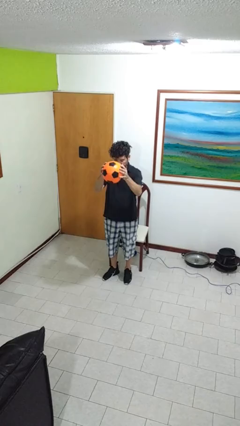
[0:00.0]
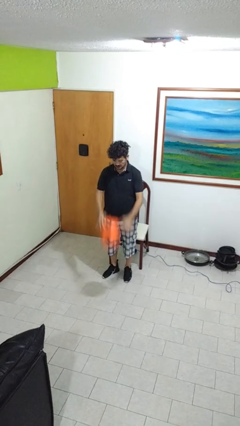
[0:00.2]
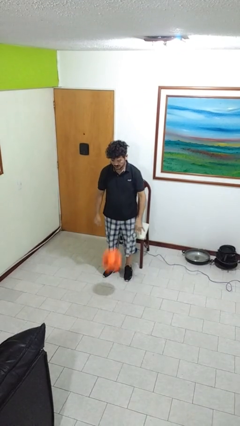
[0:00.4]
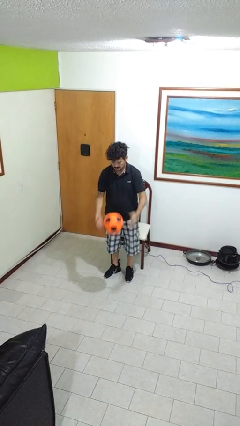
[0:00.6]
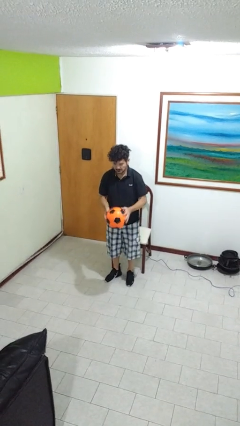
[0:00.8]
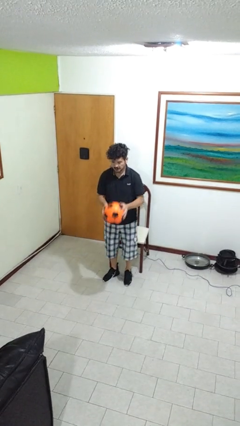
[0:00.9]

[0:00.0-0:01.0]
person bounces ball on floor

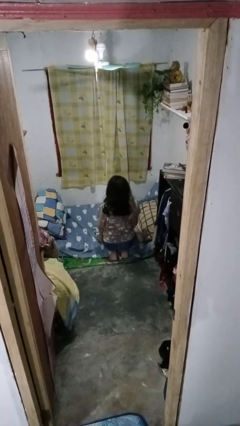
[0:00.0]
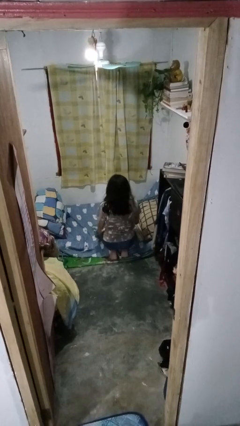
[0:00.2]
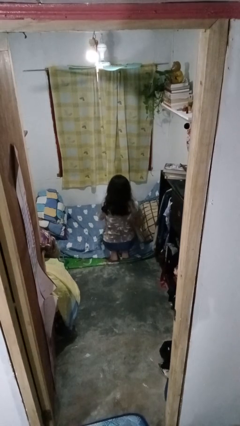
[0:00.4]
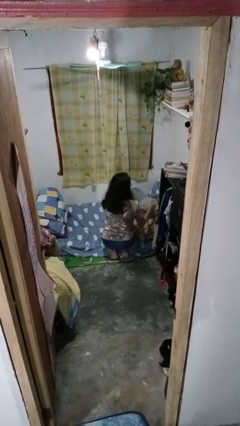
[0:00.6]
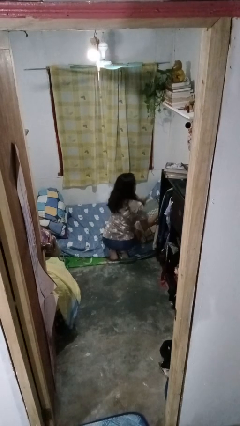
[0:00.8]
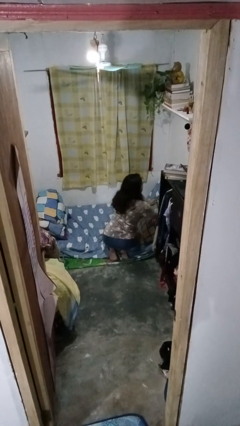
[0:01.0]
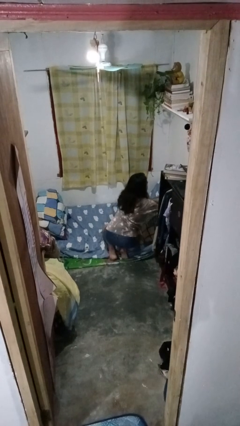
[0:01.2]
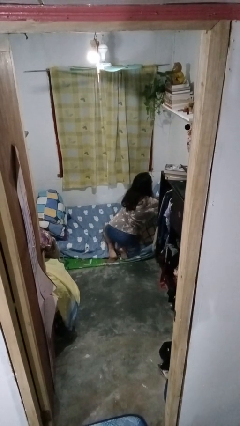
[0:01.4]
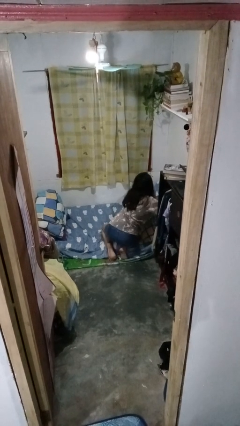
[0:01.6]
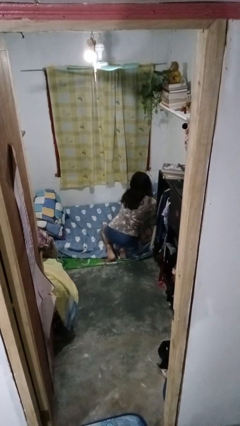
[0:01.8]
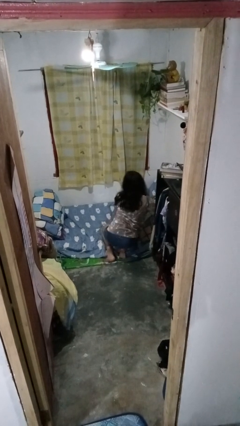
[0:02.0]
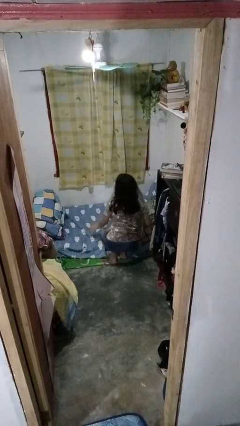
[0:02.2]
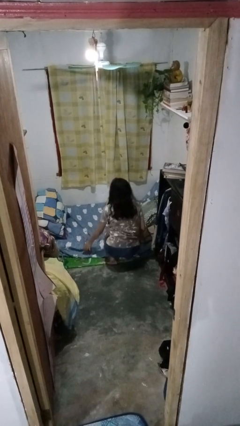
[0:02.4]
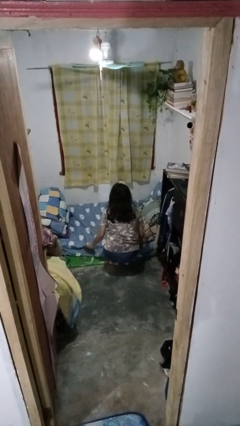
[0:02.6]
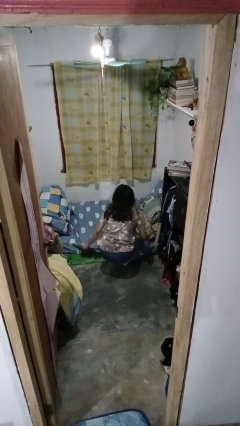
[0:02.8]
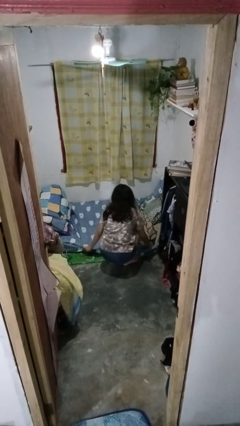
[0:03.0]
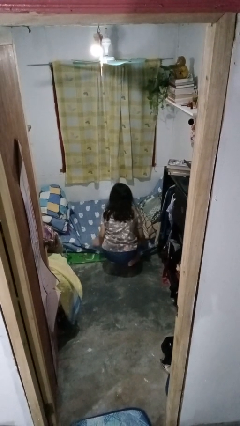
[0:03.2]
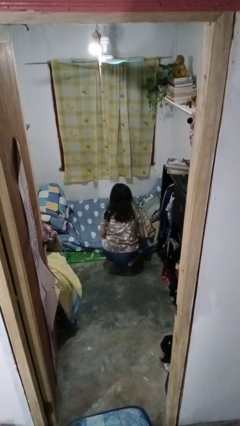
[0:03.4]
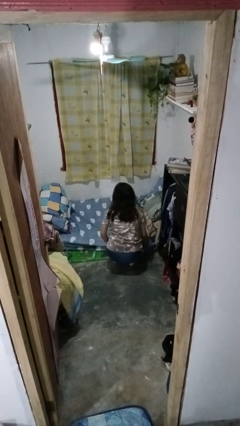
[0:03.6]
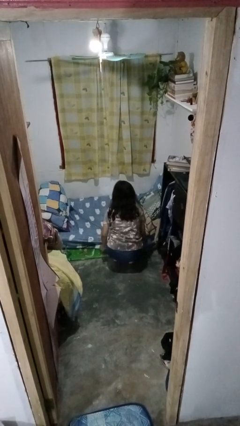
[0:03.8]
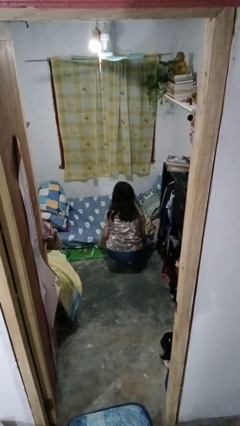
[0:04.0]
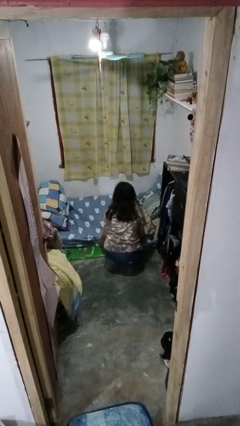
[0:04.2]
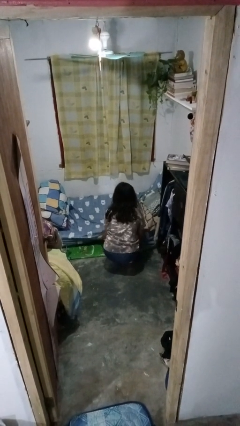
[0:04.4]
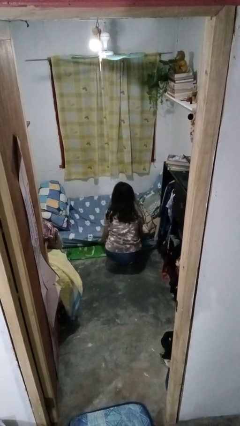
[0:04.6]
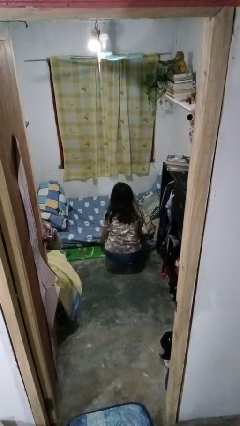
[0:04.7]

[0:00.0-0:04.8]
person makes bed

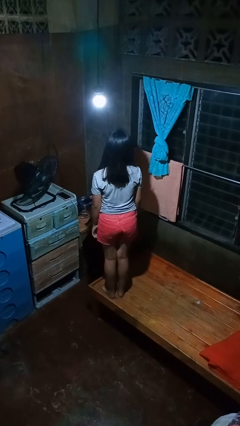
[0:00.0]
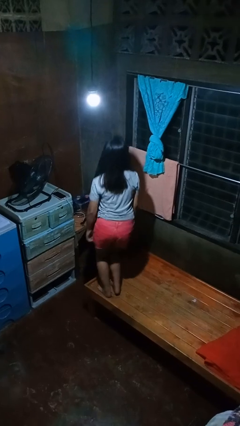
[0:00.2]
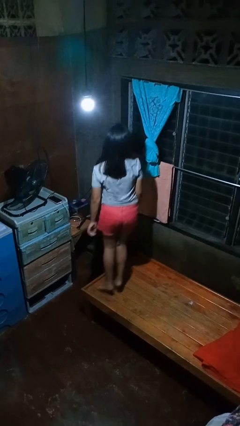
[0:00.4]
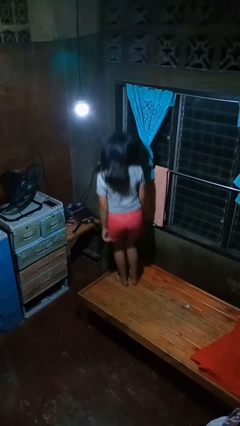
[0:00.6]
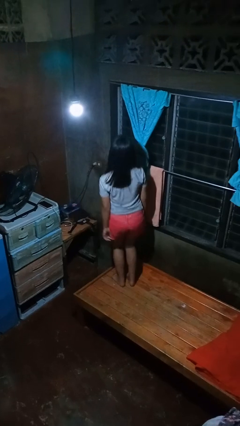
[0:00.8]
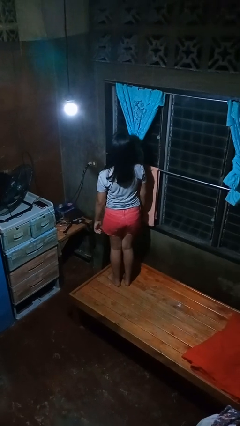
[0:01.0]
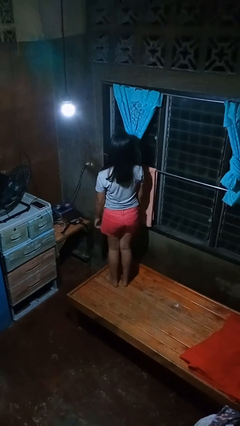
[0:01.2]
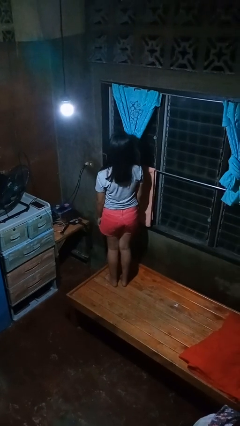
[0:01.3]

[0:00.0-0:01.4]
person jumps on bed

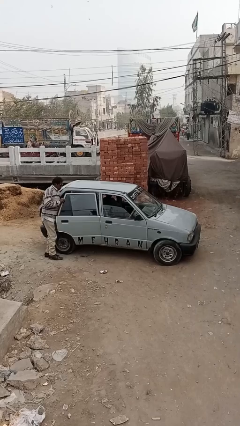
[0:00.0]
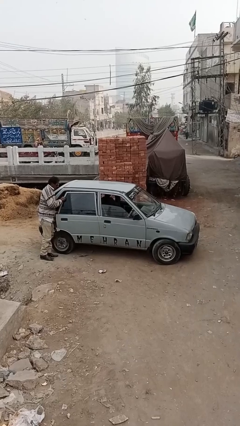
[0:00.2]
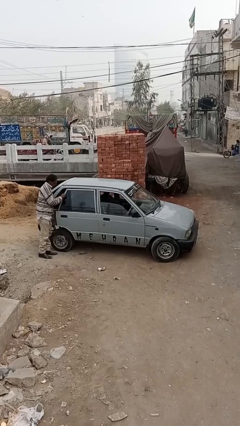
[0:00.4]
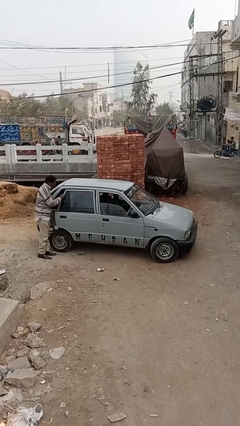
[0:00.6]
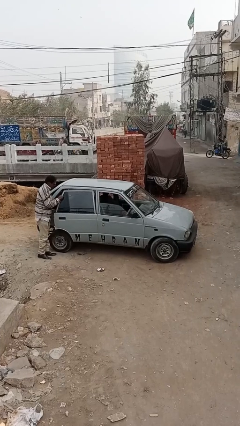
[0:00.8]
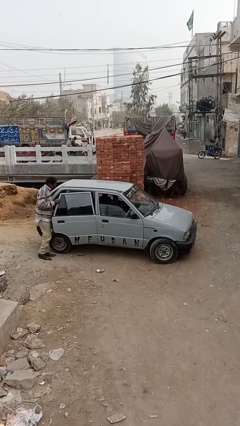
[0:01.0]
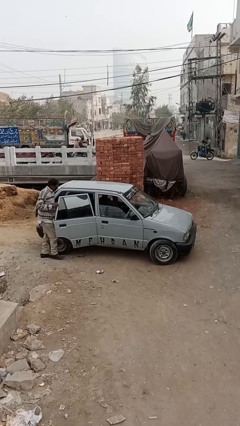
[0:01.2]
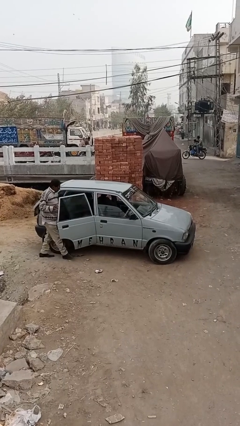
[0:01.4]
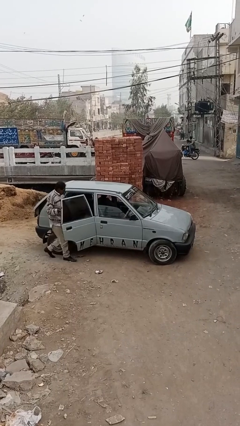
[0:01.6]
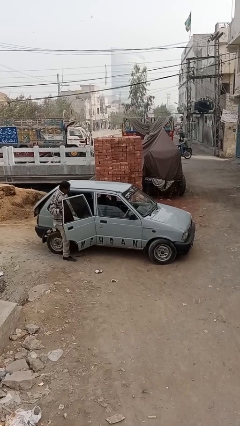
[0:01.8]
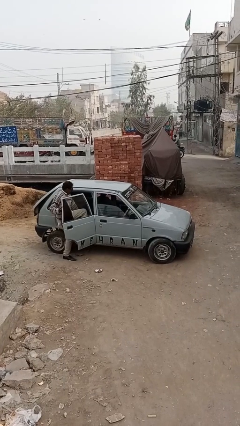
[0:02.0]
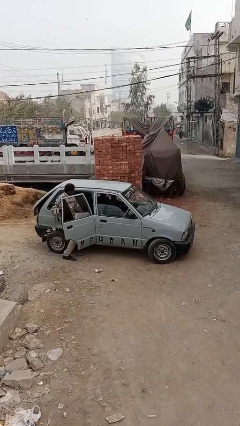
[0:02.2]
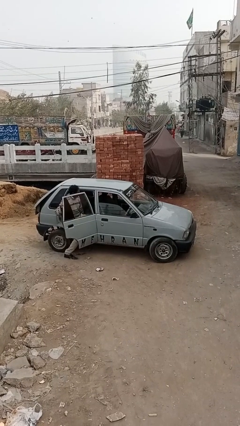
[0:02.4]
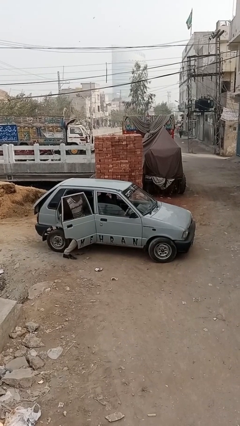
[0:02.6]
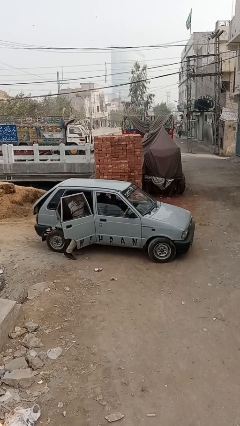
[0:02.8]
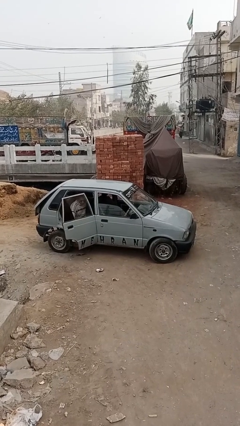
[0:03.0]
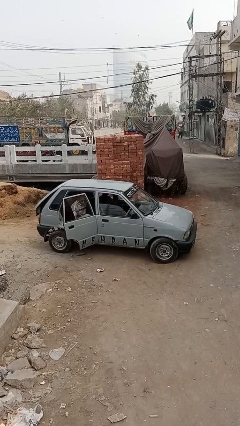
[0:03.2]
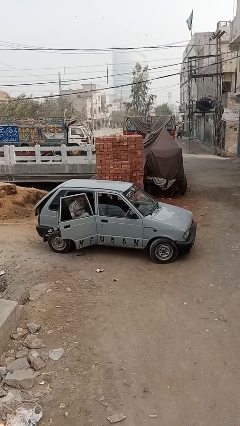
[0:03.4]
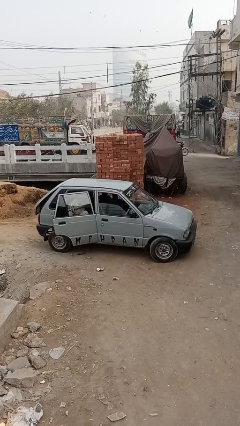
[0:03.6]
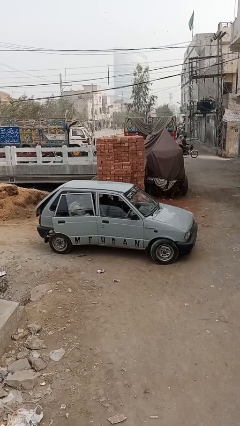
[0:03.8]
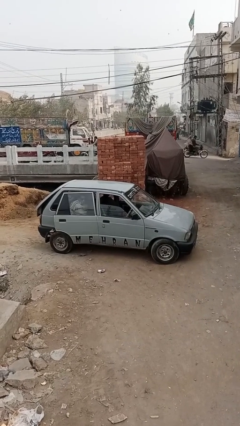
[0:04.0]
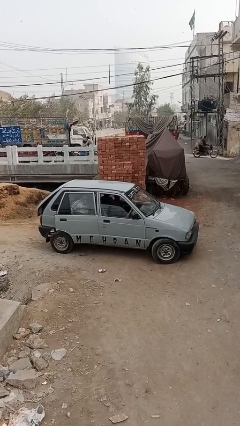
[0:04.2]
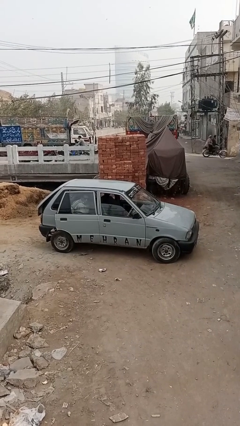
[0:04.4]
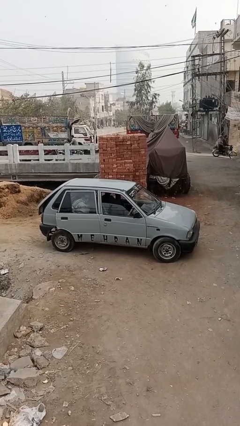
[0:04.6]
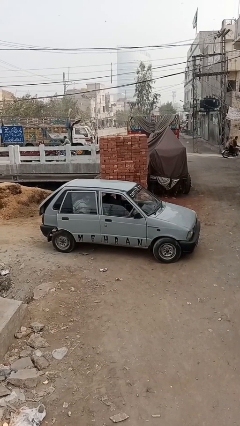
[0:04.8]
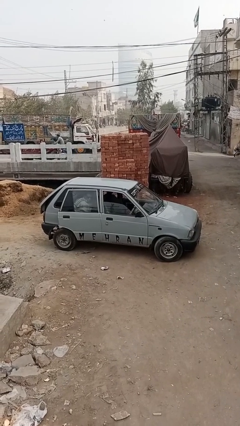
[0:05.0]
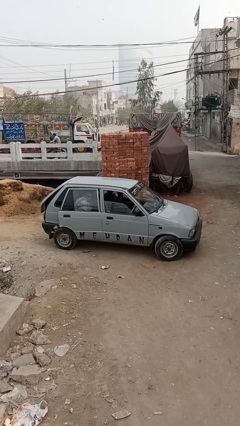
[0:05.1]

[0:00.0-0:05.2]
car picks up person

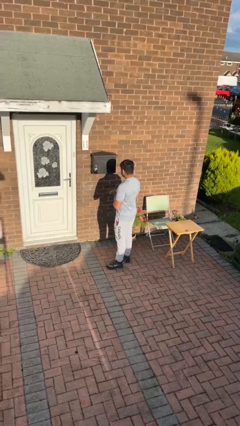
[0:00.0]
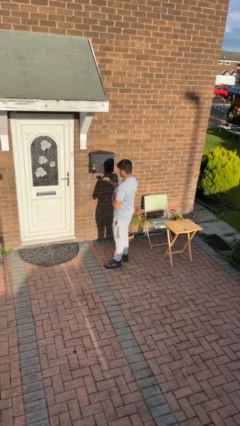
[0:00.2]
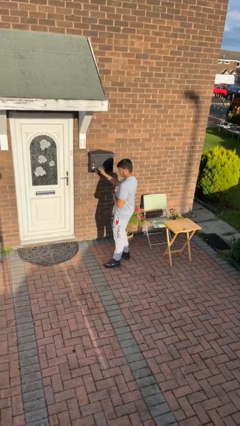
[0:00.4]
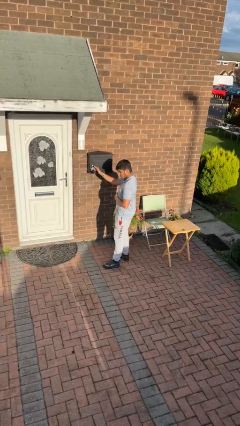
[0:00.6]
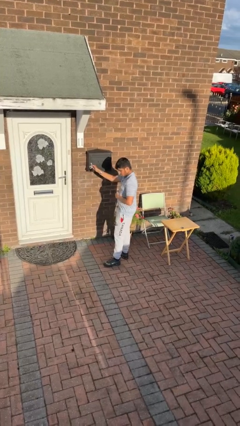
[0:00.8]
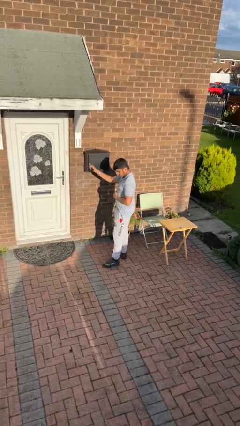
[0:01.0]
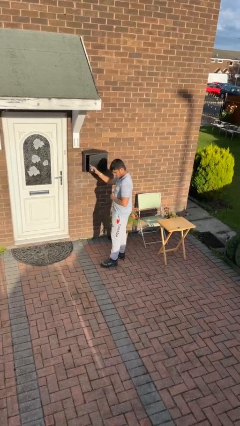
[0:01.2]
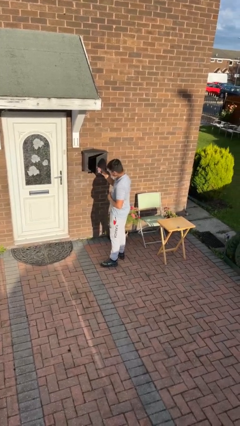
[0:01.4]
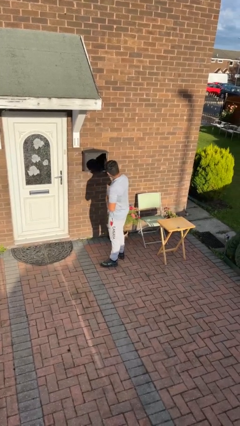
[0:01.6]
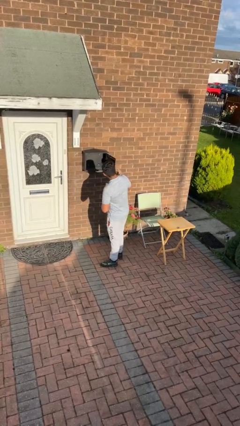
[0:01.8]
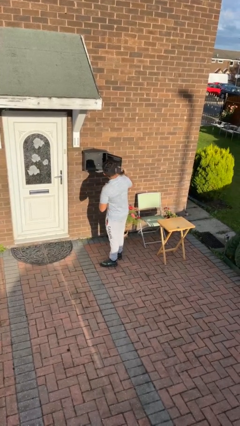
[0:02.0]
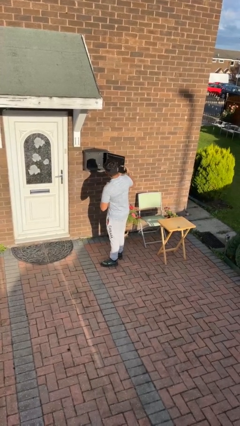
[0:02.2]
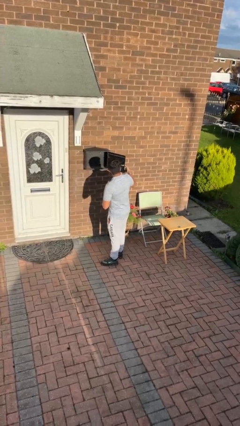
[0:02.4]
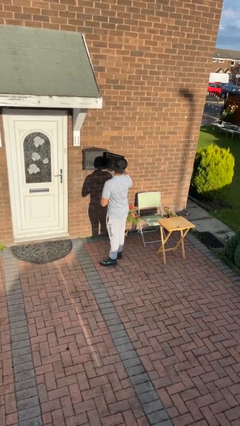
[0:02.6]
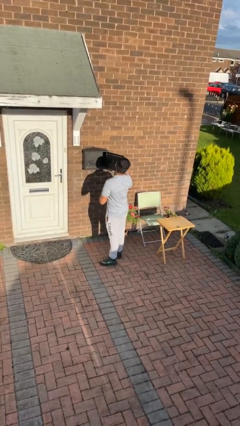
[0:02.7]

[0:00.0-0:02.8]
person opens mailbox

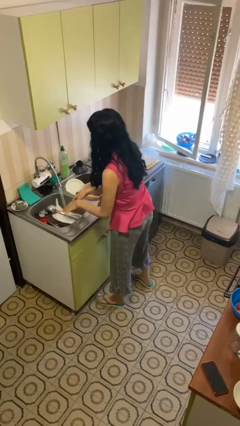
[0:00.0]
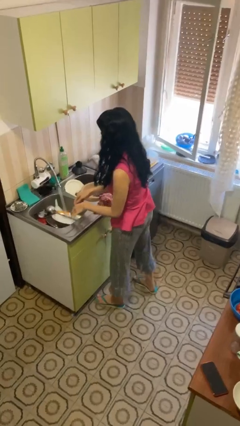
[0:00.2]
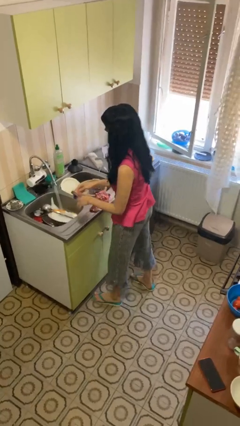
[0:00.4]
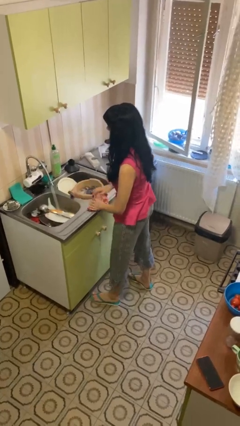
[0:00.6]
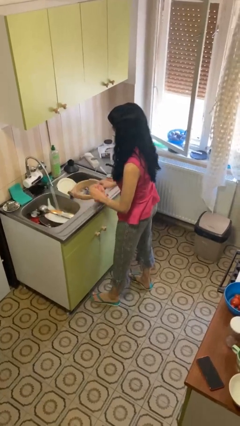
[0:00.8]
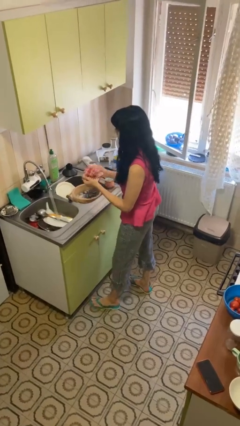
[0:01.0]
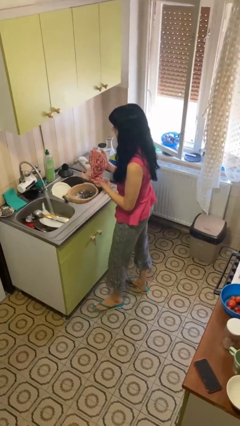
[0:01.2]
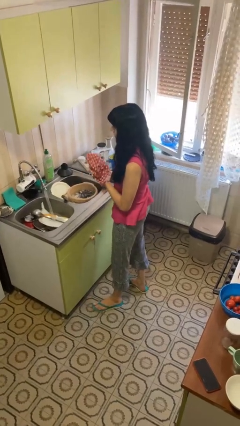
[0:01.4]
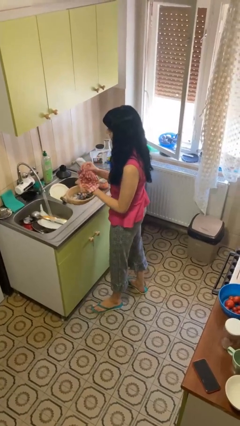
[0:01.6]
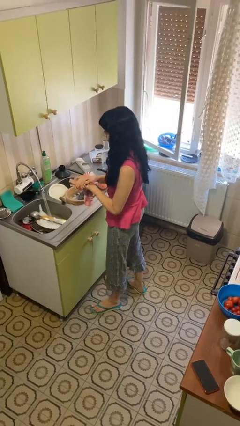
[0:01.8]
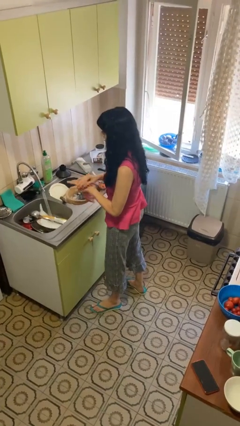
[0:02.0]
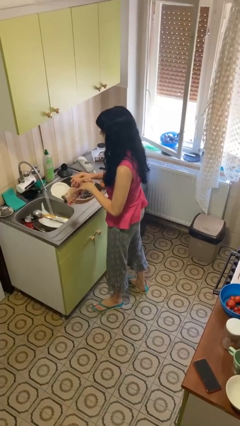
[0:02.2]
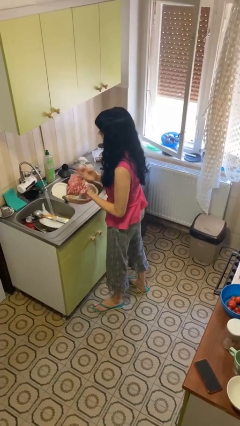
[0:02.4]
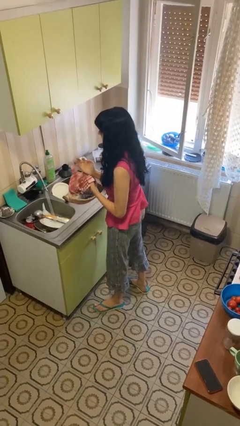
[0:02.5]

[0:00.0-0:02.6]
person dries hands with towel
